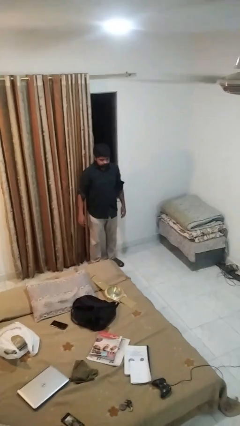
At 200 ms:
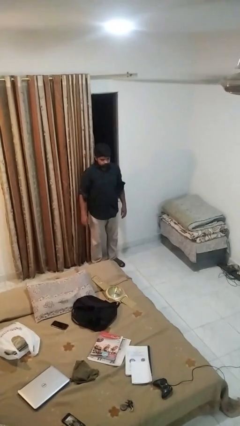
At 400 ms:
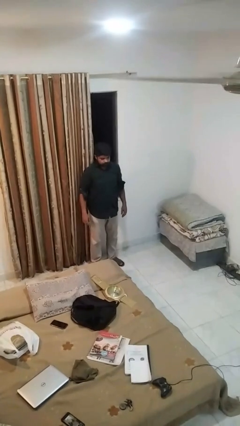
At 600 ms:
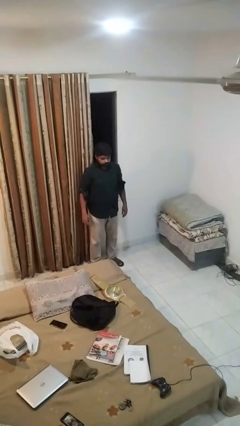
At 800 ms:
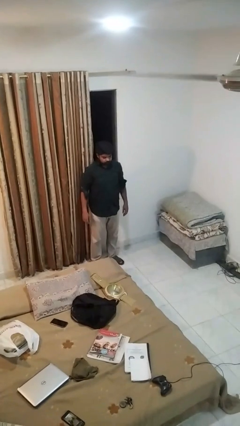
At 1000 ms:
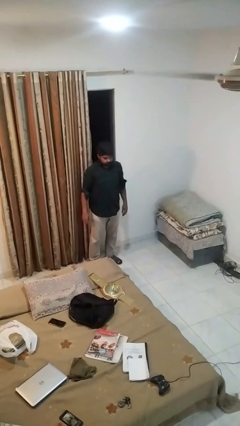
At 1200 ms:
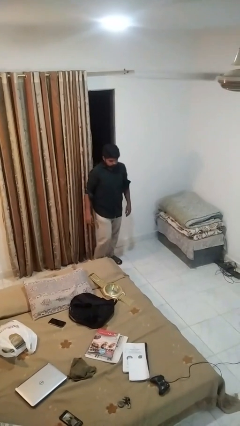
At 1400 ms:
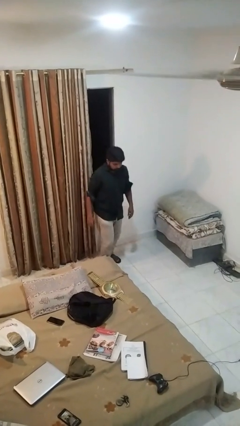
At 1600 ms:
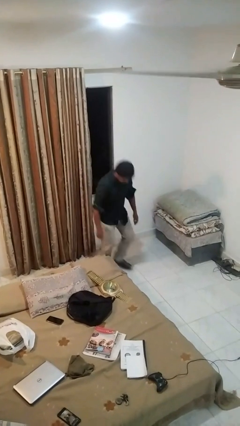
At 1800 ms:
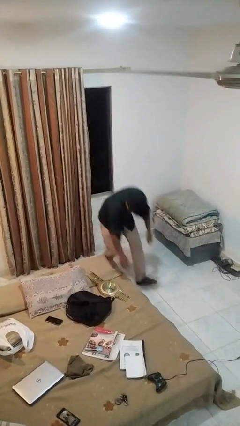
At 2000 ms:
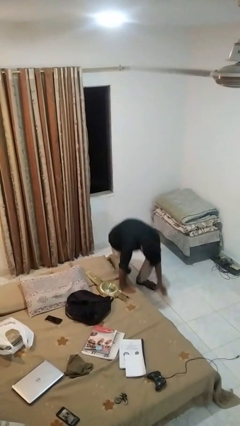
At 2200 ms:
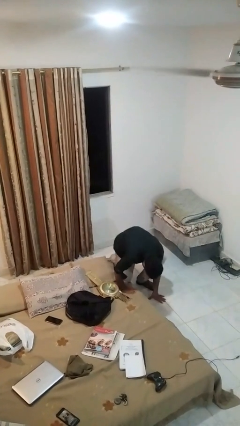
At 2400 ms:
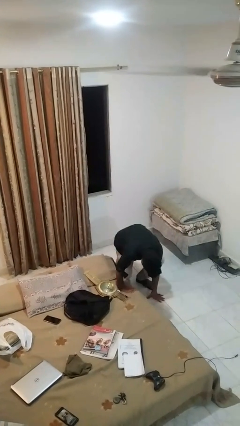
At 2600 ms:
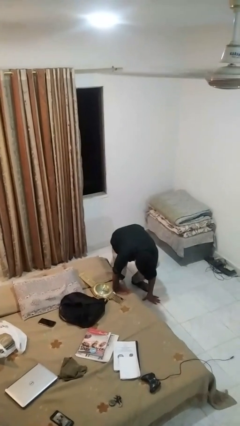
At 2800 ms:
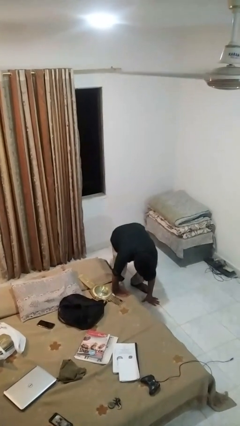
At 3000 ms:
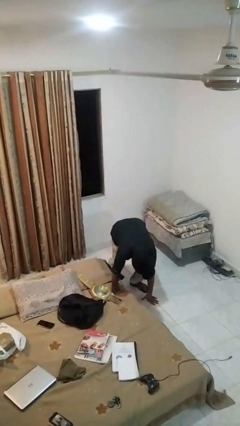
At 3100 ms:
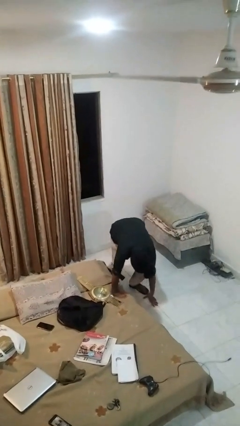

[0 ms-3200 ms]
person trips on object on floor

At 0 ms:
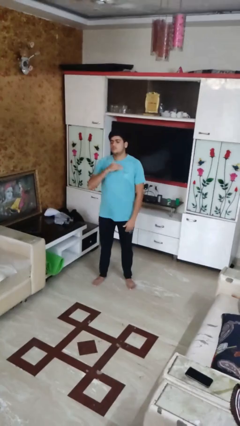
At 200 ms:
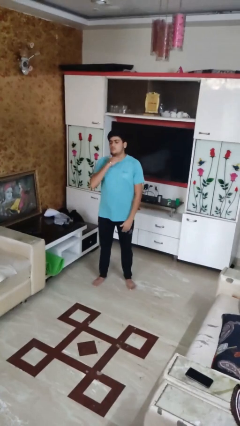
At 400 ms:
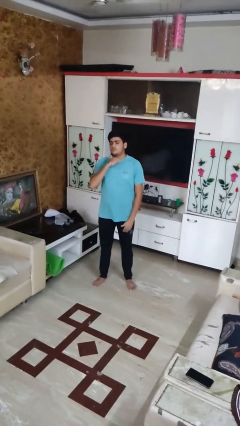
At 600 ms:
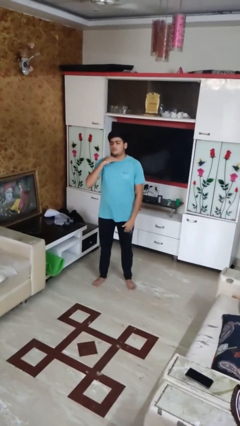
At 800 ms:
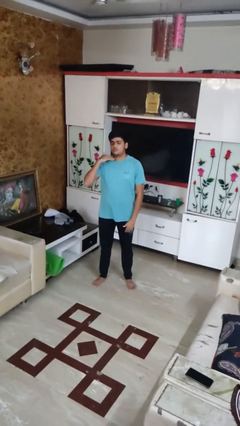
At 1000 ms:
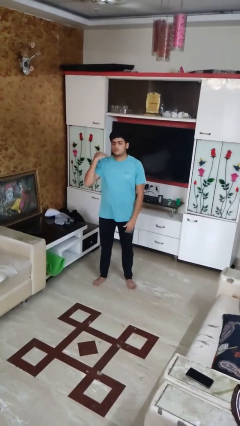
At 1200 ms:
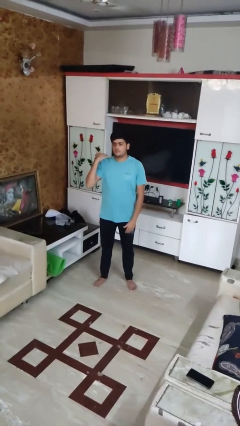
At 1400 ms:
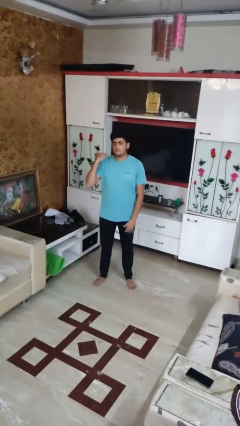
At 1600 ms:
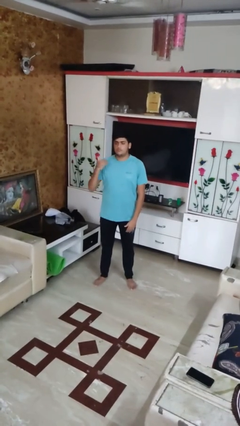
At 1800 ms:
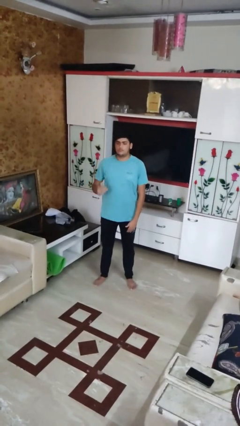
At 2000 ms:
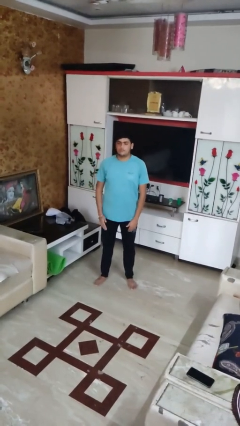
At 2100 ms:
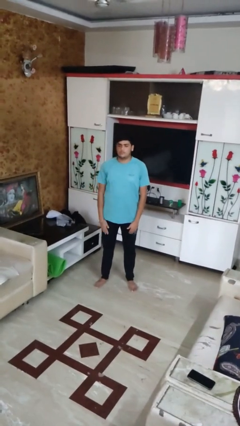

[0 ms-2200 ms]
person gestures cut

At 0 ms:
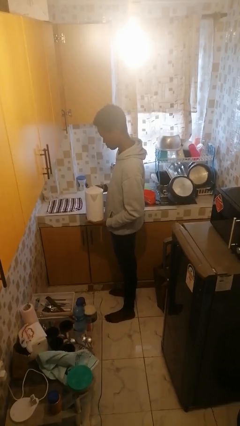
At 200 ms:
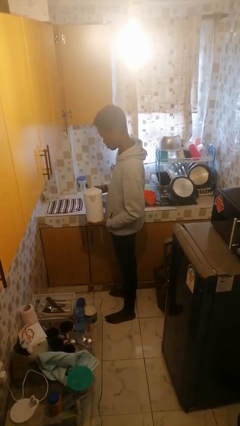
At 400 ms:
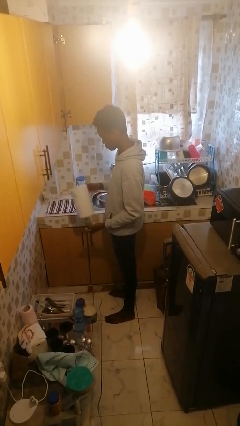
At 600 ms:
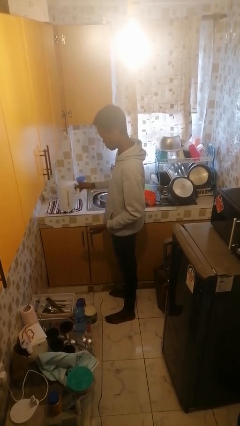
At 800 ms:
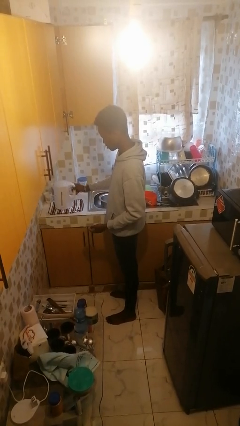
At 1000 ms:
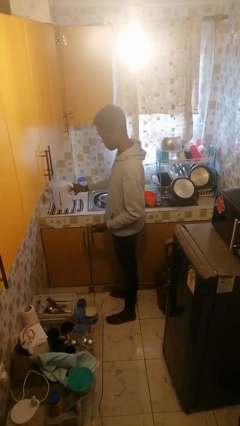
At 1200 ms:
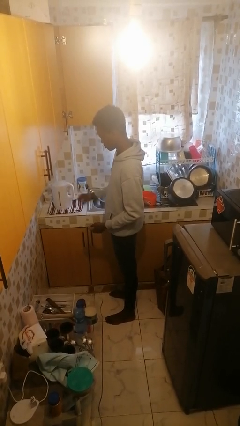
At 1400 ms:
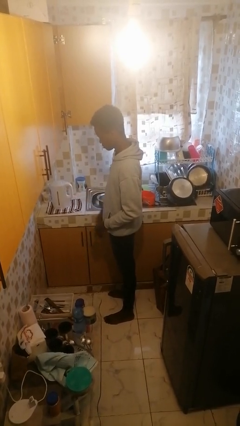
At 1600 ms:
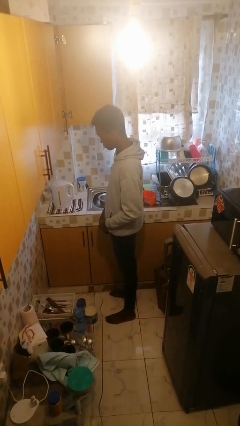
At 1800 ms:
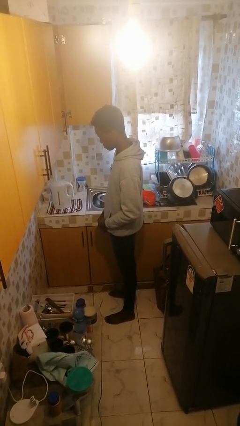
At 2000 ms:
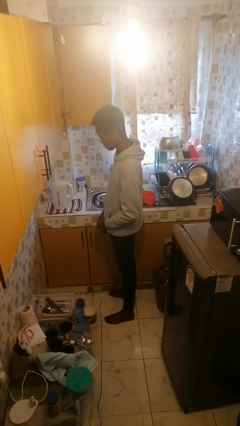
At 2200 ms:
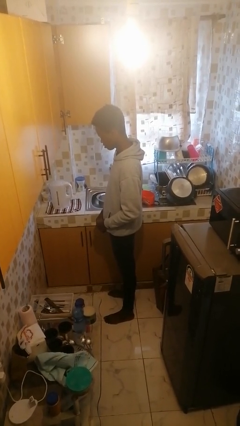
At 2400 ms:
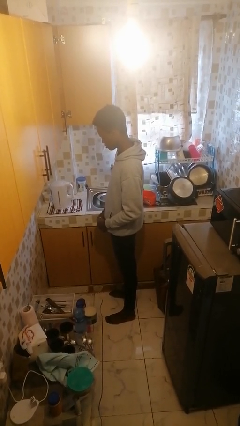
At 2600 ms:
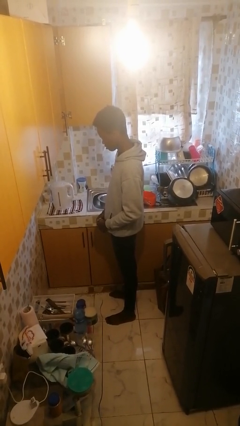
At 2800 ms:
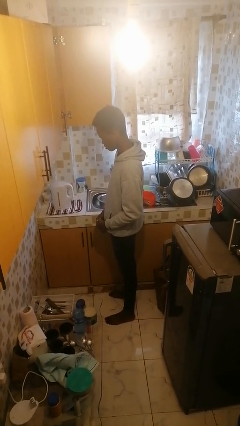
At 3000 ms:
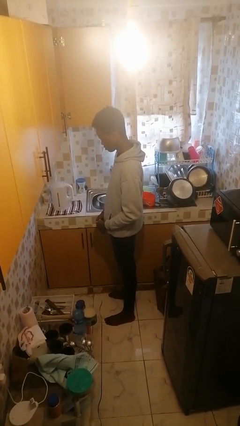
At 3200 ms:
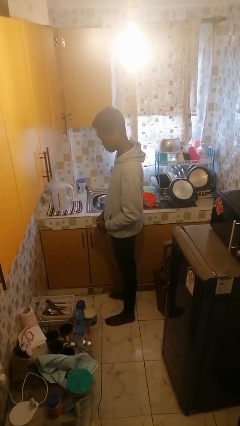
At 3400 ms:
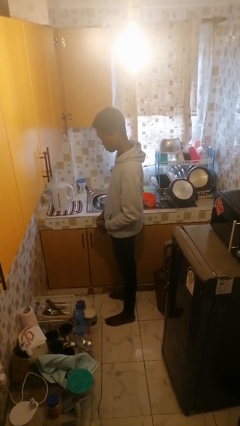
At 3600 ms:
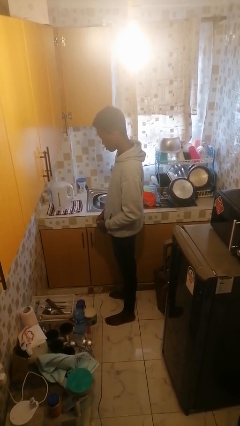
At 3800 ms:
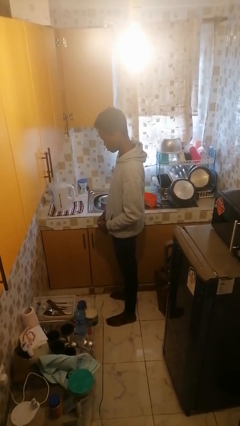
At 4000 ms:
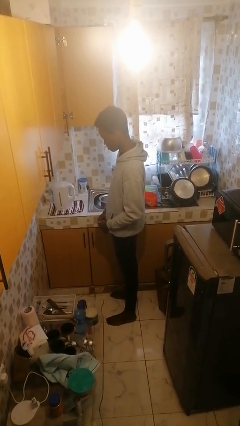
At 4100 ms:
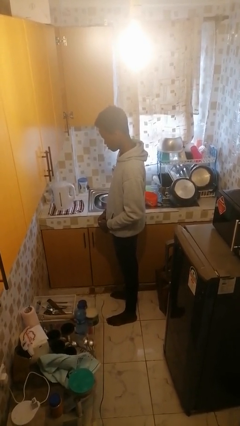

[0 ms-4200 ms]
person puts down object on countertop

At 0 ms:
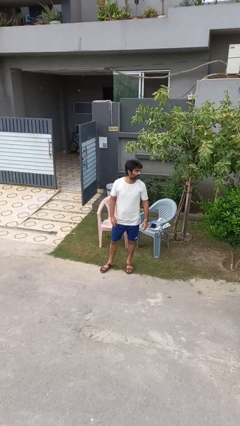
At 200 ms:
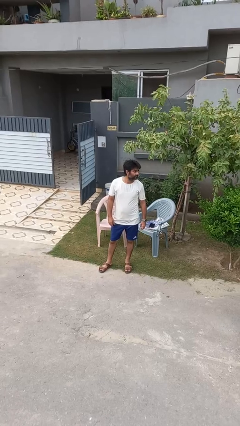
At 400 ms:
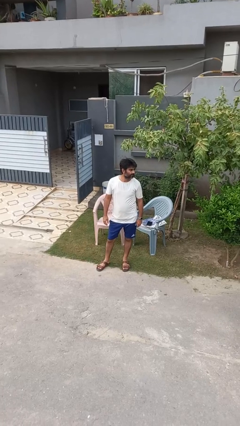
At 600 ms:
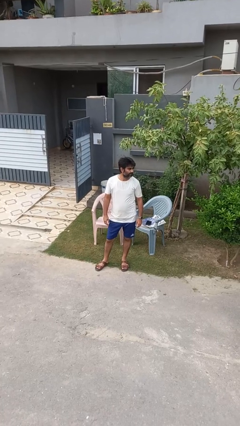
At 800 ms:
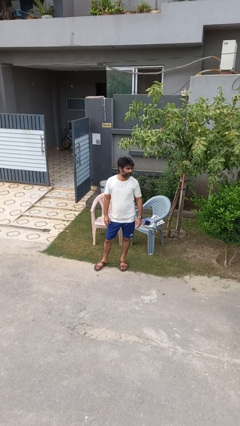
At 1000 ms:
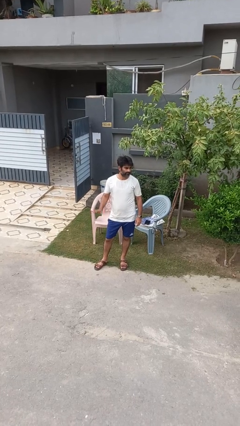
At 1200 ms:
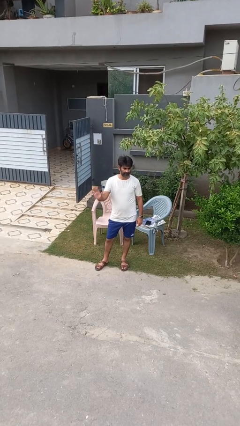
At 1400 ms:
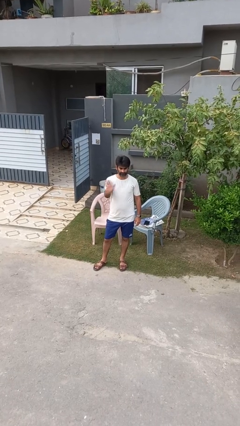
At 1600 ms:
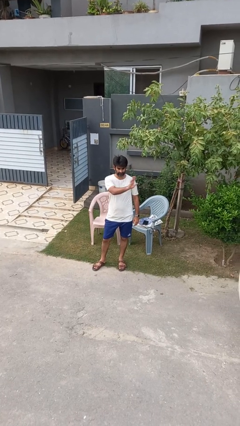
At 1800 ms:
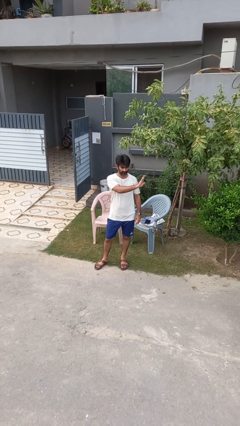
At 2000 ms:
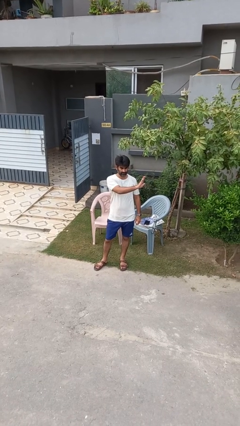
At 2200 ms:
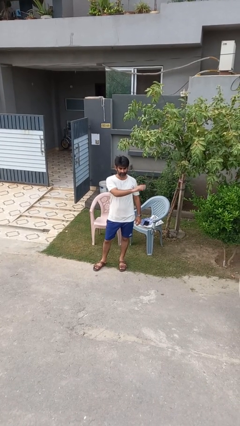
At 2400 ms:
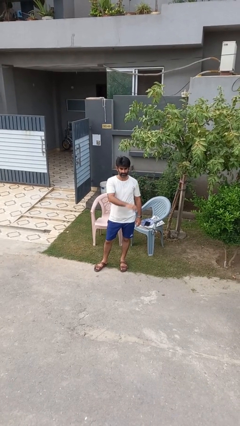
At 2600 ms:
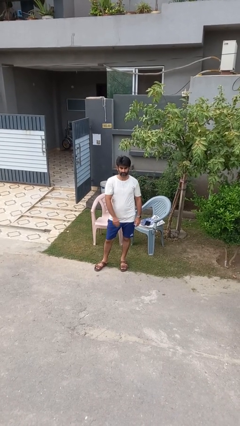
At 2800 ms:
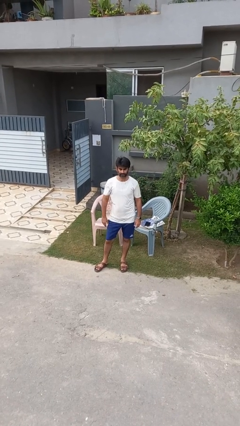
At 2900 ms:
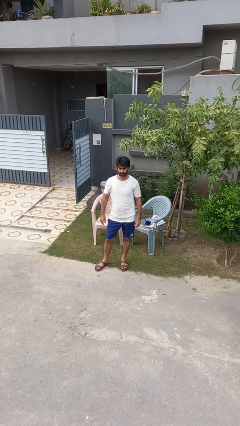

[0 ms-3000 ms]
person gestures swipe left

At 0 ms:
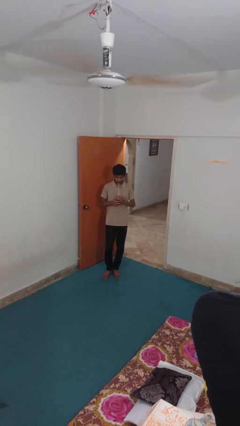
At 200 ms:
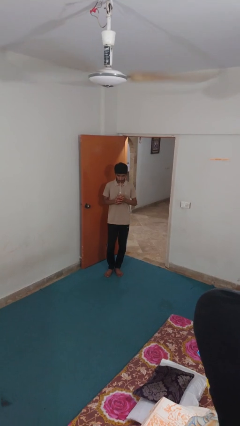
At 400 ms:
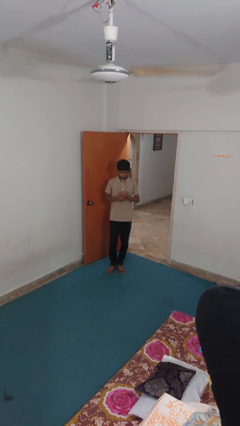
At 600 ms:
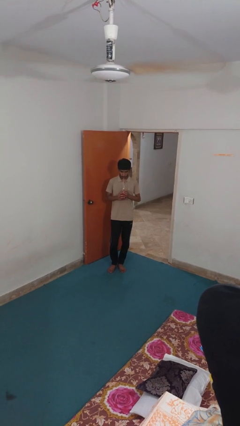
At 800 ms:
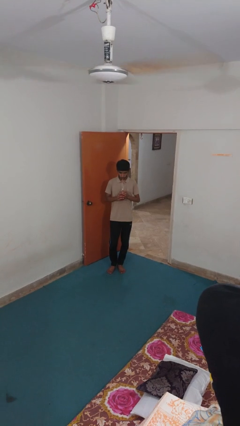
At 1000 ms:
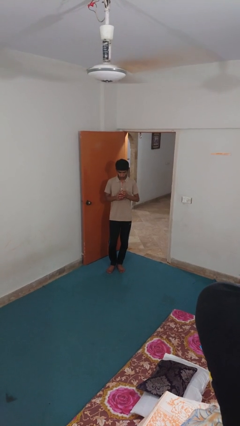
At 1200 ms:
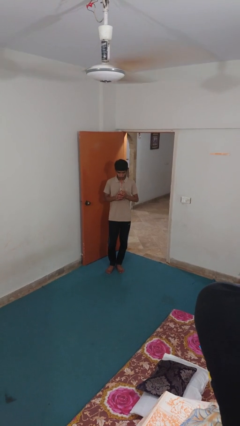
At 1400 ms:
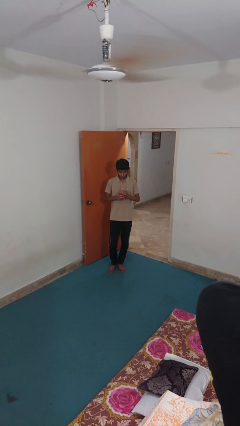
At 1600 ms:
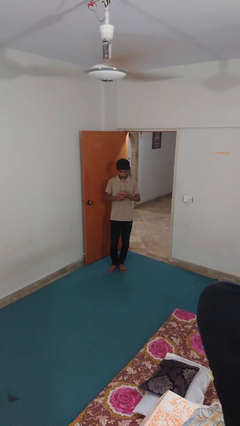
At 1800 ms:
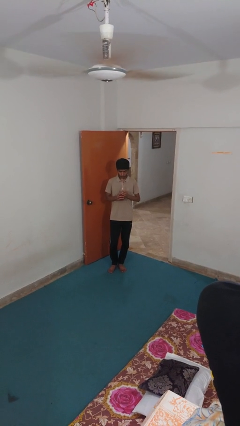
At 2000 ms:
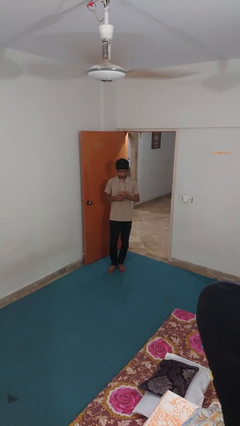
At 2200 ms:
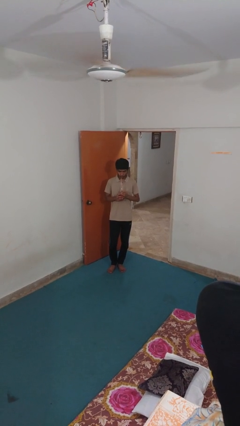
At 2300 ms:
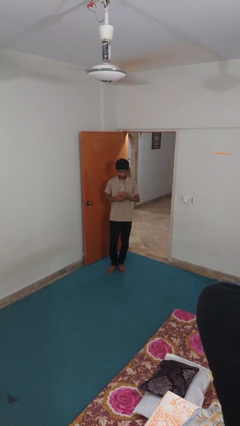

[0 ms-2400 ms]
person drinks from straw

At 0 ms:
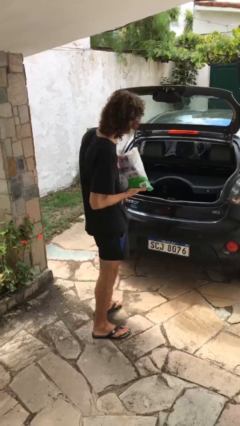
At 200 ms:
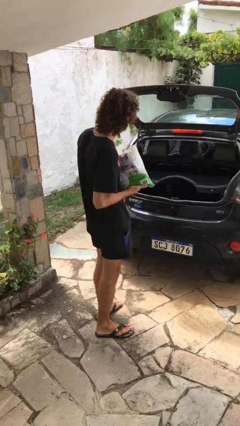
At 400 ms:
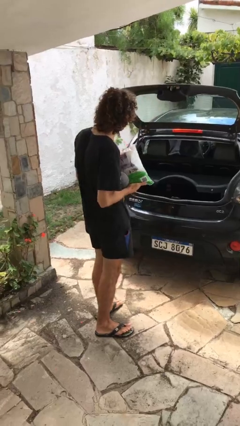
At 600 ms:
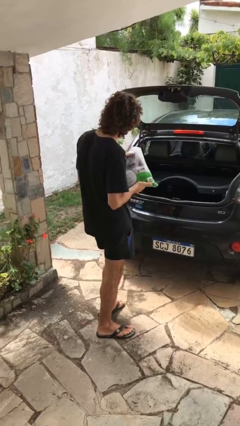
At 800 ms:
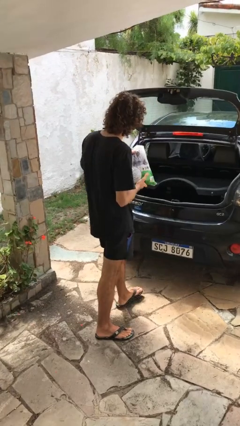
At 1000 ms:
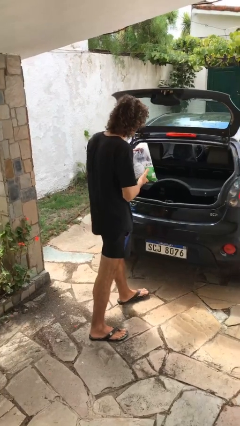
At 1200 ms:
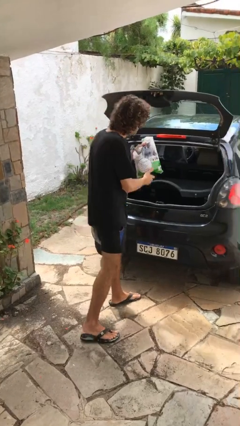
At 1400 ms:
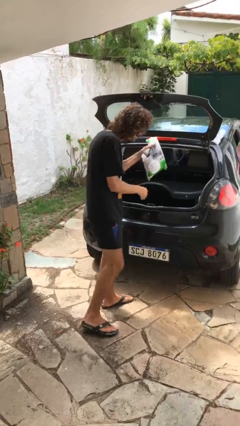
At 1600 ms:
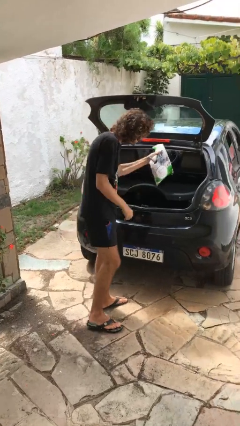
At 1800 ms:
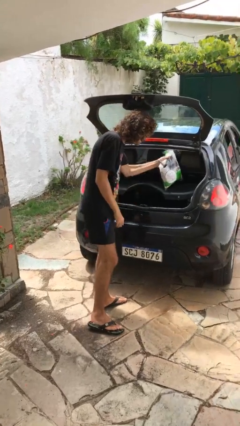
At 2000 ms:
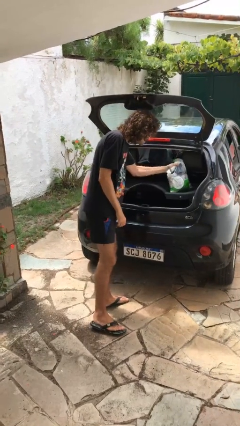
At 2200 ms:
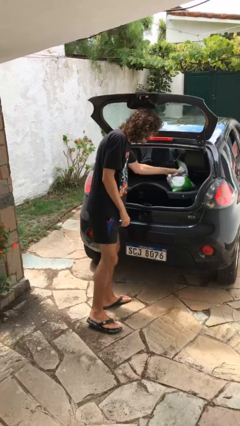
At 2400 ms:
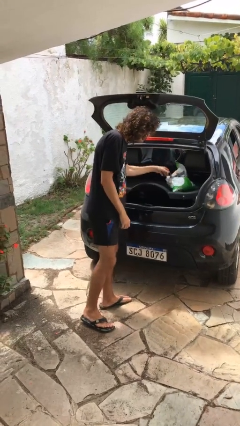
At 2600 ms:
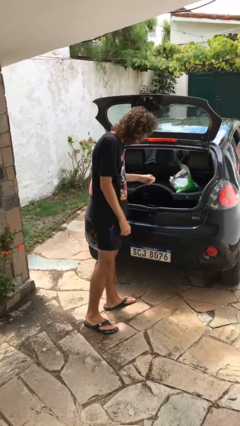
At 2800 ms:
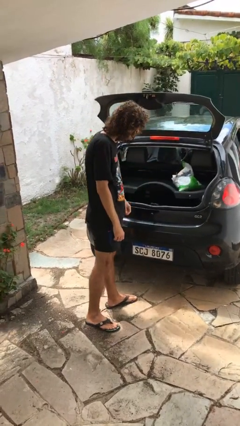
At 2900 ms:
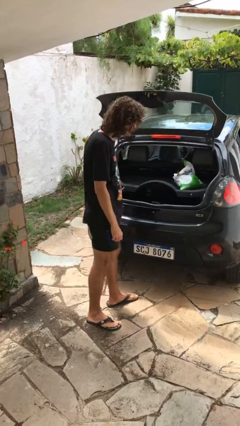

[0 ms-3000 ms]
person loads car
